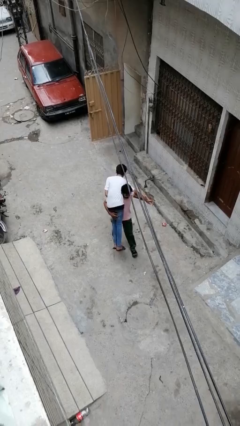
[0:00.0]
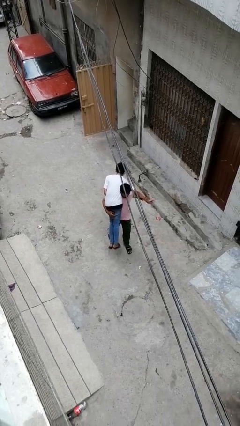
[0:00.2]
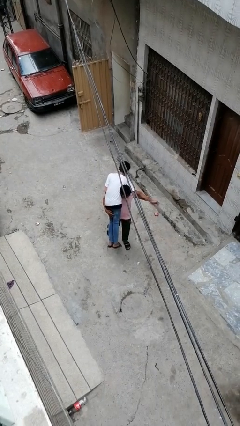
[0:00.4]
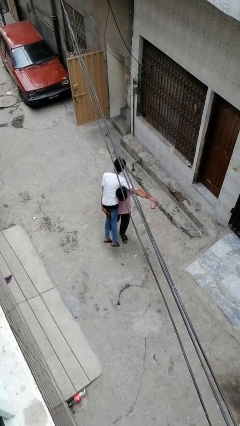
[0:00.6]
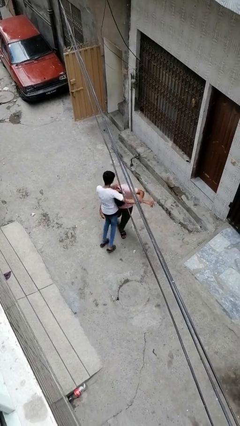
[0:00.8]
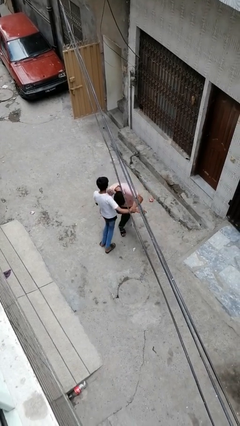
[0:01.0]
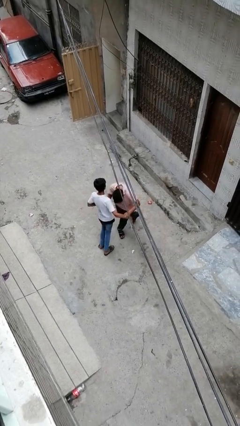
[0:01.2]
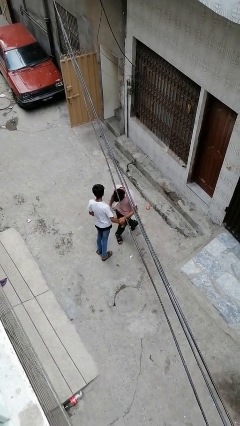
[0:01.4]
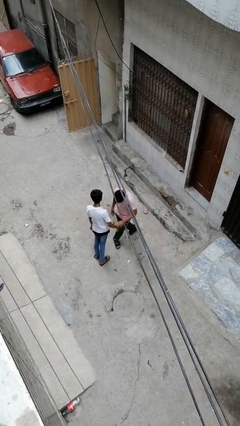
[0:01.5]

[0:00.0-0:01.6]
person puts down person

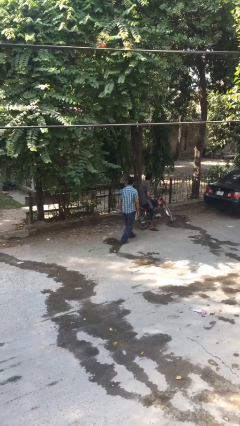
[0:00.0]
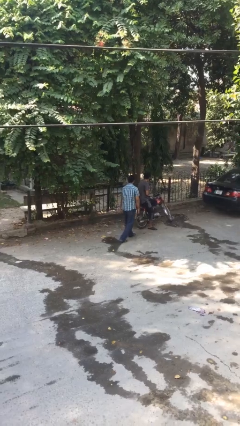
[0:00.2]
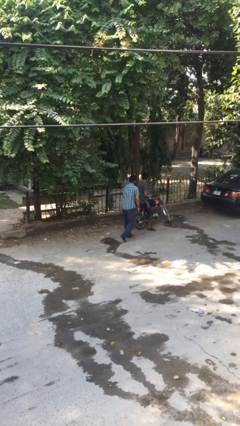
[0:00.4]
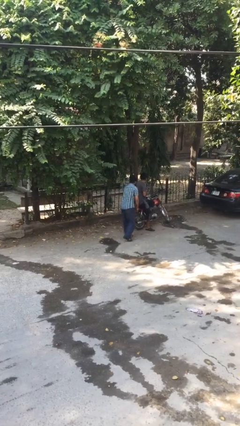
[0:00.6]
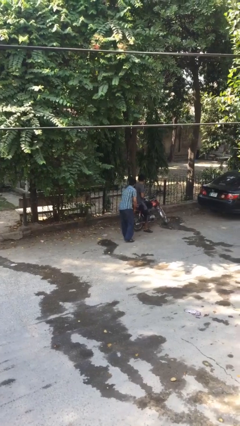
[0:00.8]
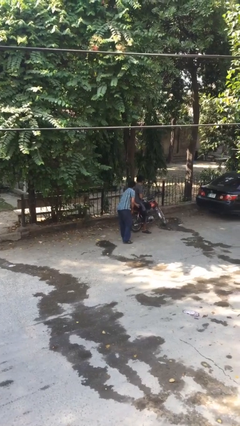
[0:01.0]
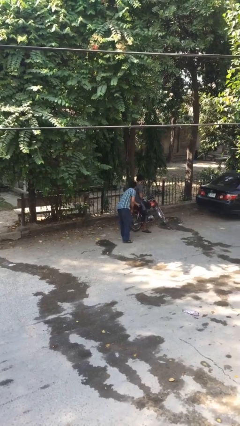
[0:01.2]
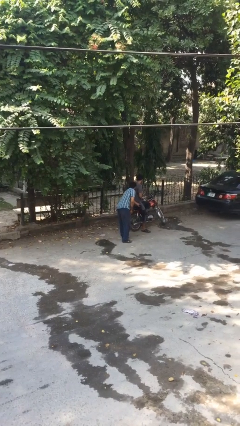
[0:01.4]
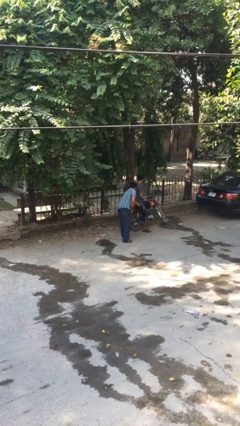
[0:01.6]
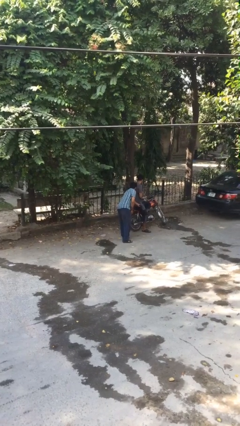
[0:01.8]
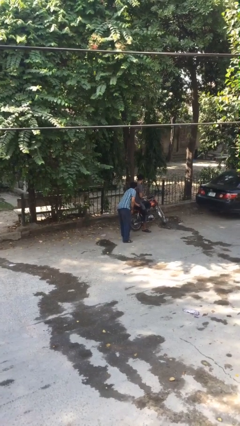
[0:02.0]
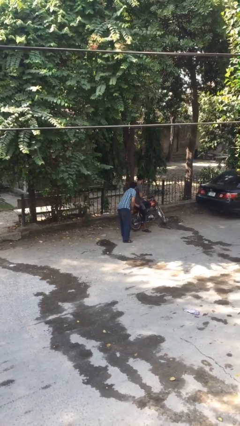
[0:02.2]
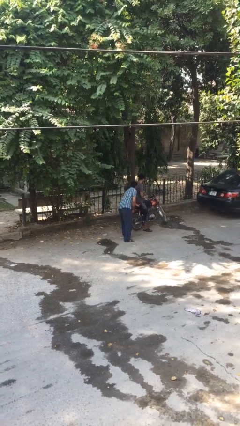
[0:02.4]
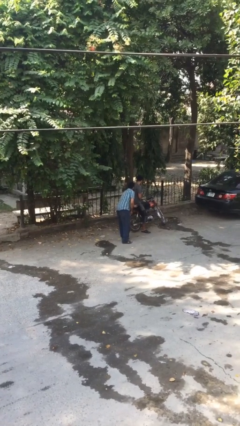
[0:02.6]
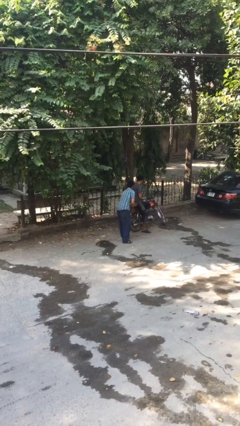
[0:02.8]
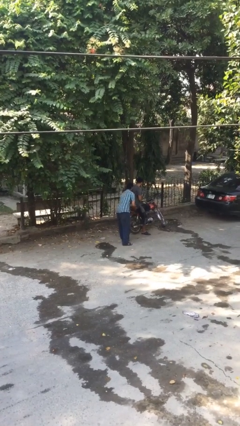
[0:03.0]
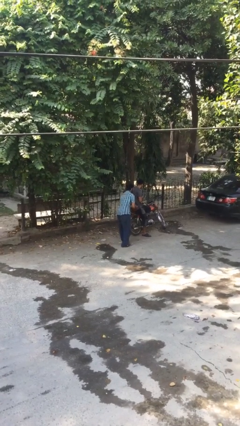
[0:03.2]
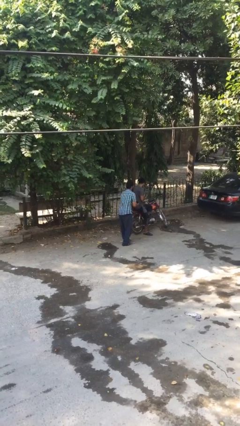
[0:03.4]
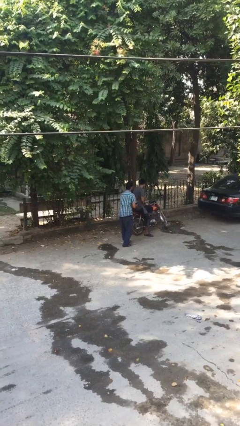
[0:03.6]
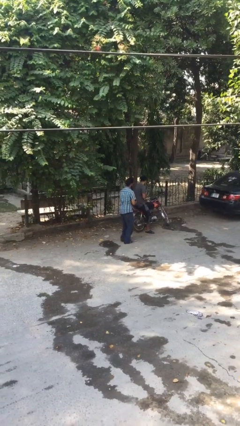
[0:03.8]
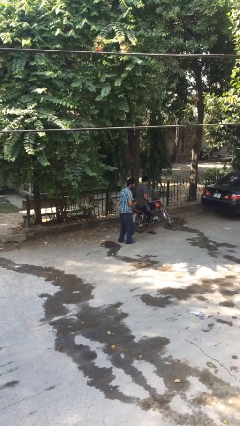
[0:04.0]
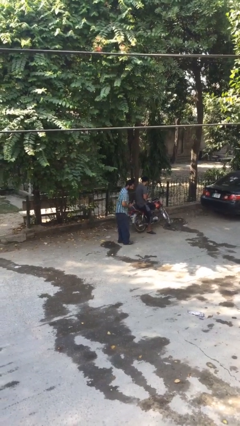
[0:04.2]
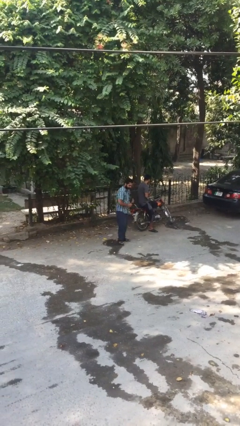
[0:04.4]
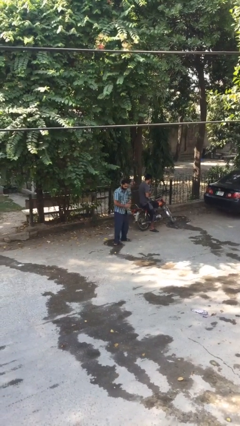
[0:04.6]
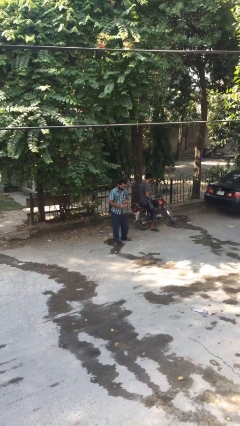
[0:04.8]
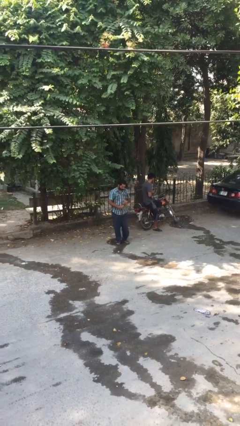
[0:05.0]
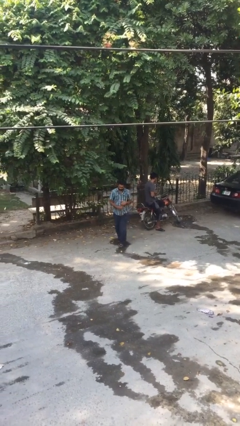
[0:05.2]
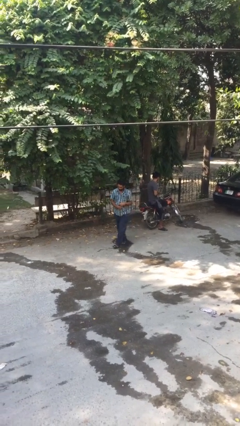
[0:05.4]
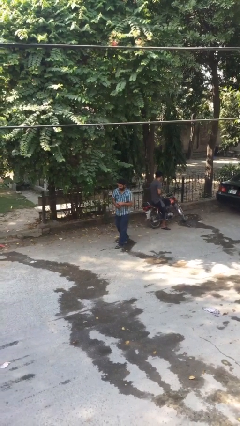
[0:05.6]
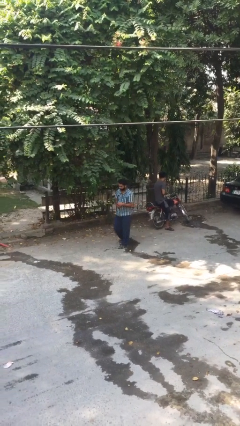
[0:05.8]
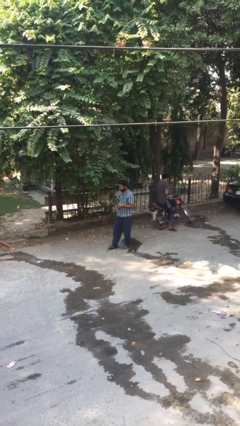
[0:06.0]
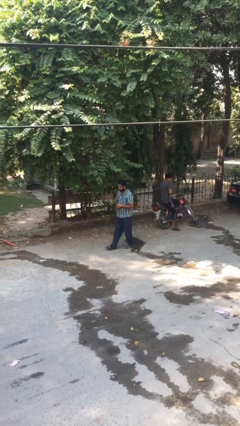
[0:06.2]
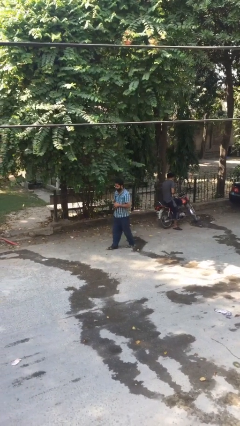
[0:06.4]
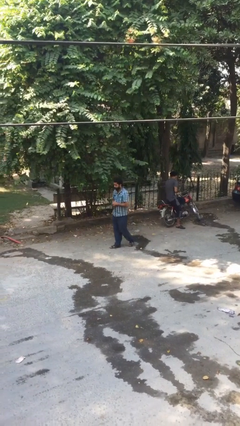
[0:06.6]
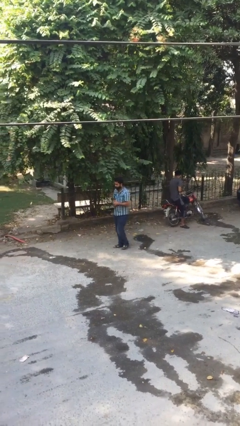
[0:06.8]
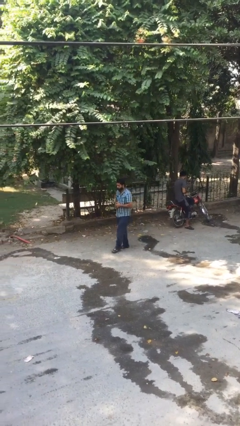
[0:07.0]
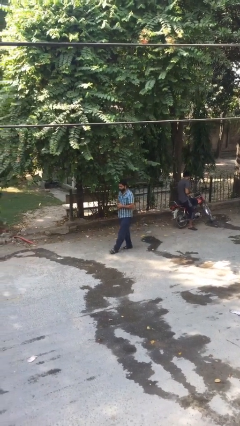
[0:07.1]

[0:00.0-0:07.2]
person steals object from person

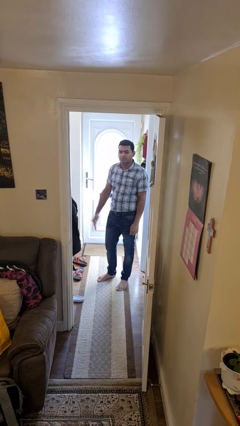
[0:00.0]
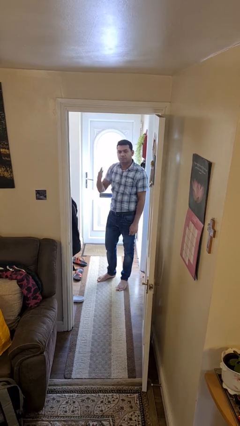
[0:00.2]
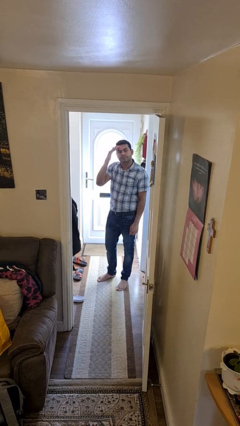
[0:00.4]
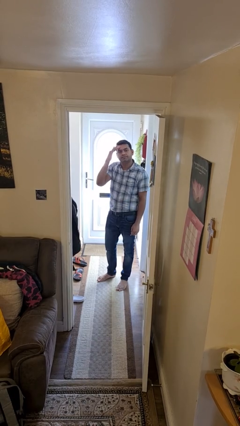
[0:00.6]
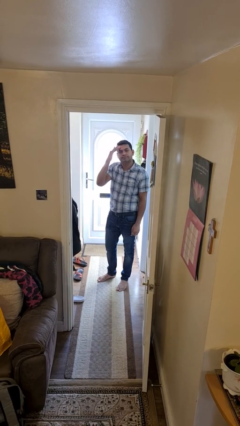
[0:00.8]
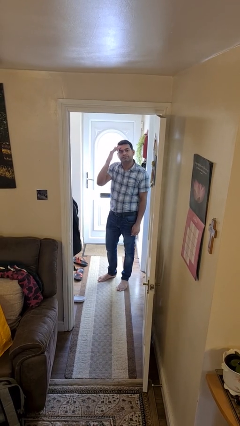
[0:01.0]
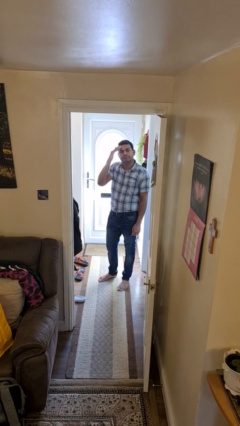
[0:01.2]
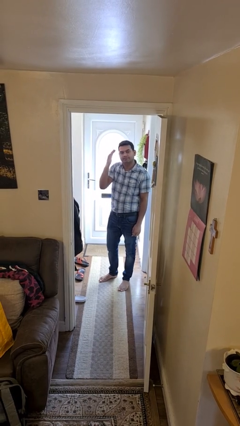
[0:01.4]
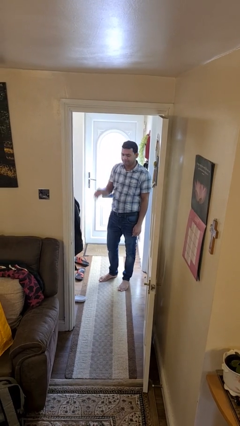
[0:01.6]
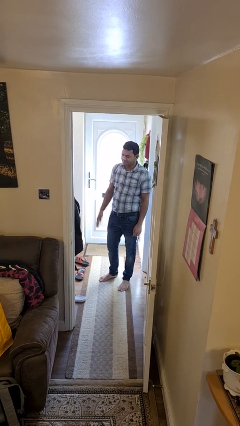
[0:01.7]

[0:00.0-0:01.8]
person salutes

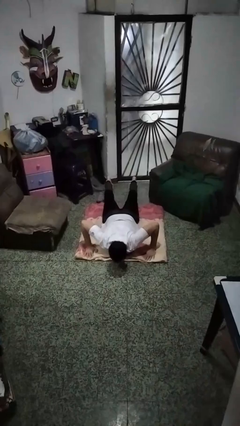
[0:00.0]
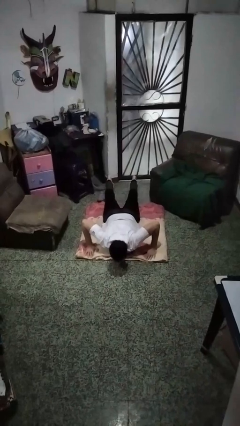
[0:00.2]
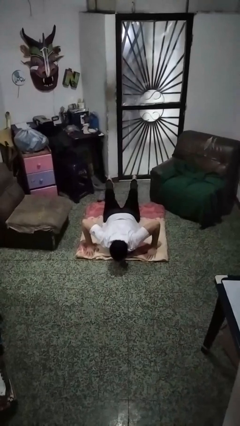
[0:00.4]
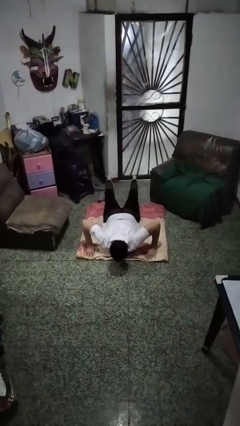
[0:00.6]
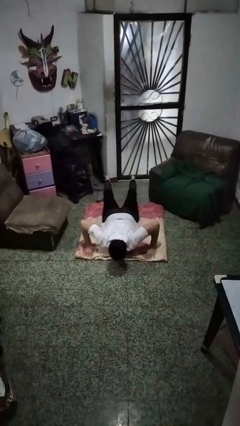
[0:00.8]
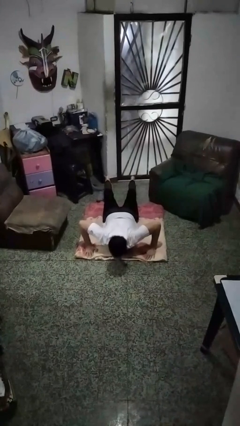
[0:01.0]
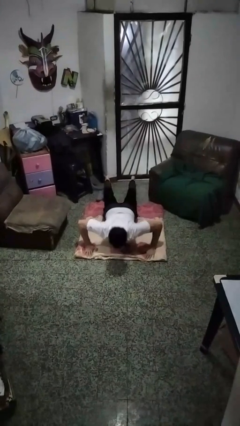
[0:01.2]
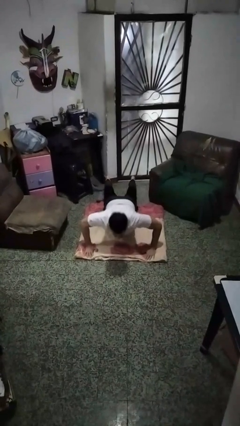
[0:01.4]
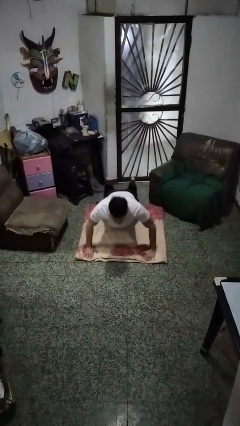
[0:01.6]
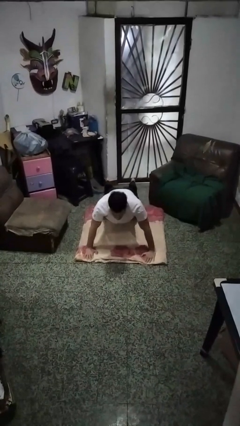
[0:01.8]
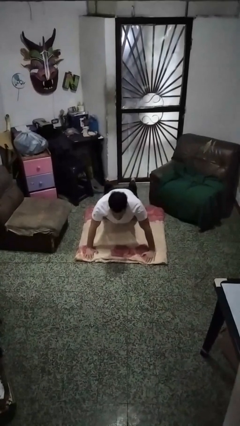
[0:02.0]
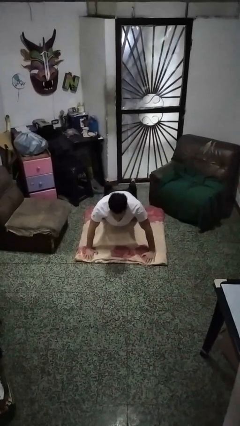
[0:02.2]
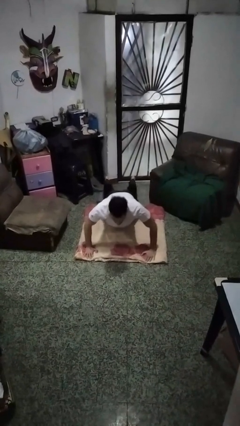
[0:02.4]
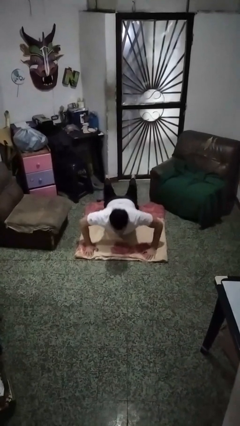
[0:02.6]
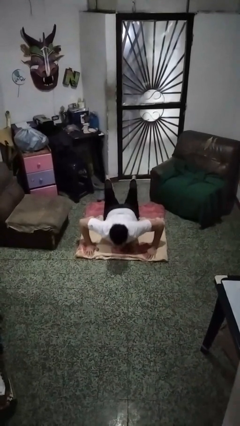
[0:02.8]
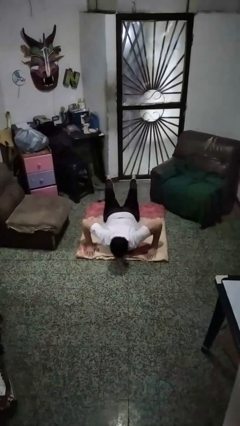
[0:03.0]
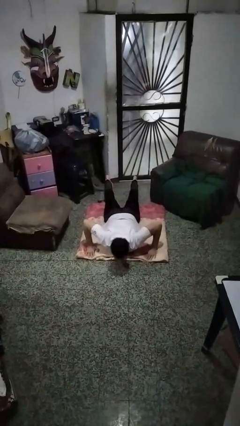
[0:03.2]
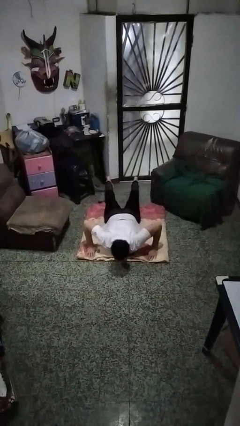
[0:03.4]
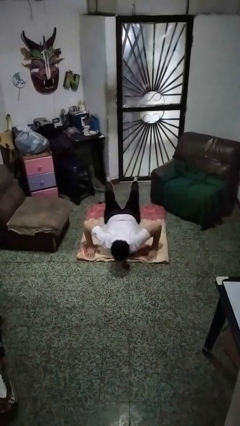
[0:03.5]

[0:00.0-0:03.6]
person exercises with pushup

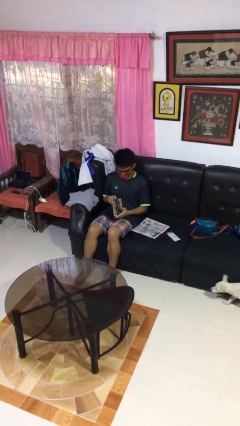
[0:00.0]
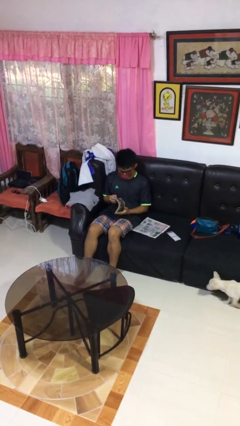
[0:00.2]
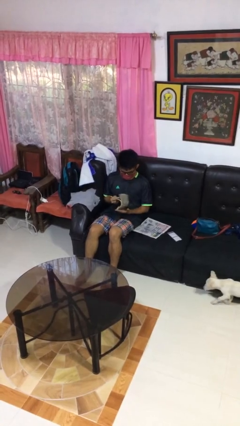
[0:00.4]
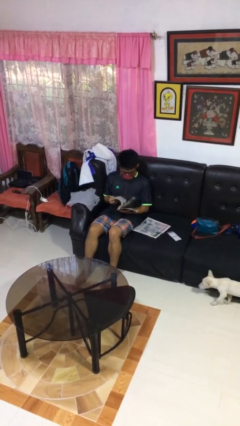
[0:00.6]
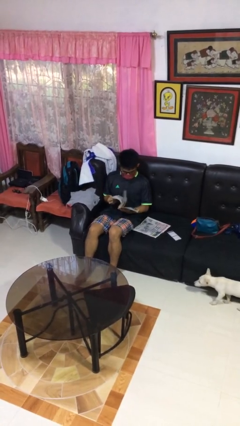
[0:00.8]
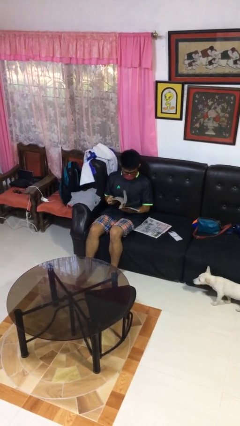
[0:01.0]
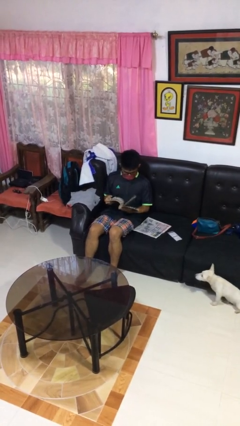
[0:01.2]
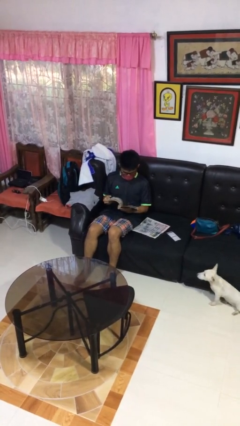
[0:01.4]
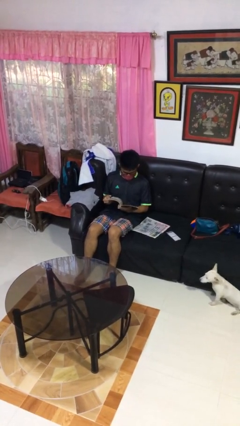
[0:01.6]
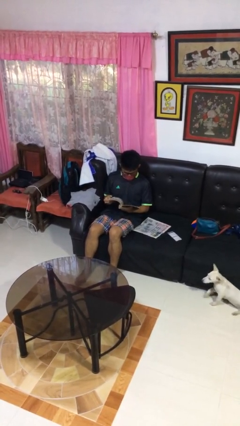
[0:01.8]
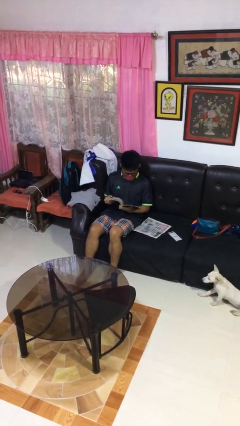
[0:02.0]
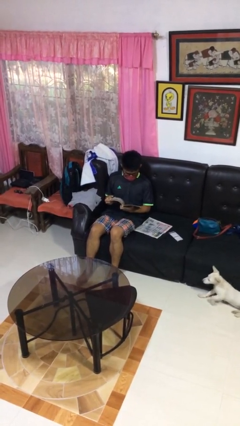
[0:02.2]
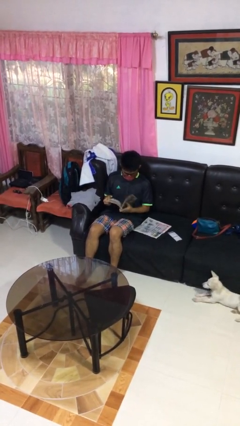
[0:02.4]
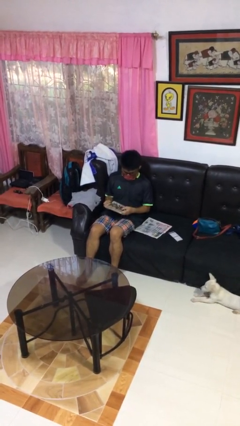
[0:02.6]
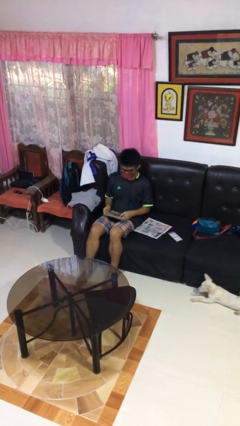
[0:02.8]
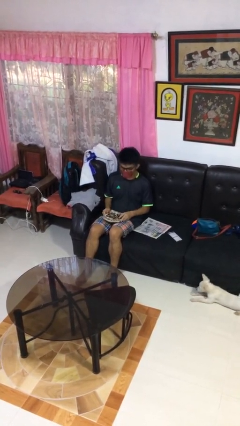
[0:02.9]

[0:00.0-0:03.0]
person reads magazine

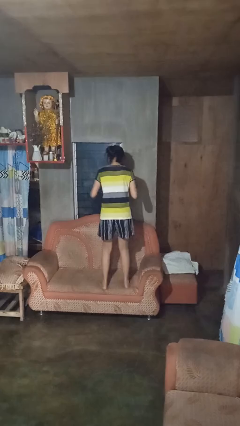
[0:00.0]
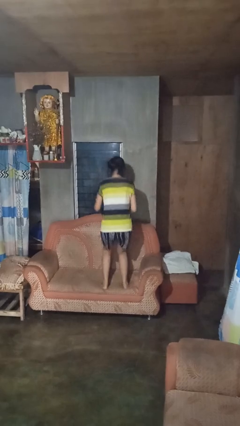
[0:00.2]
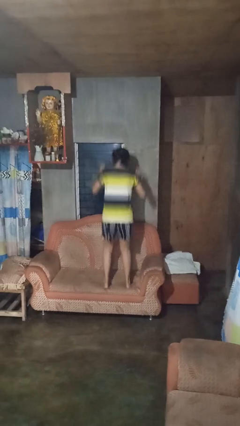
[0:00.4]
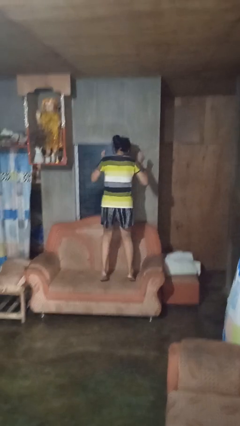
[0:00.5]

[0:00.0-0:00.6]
person jumps on couch
